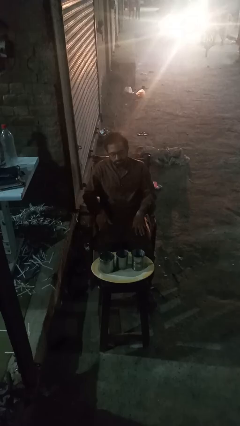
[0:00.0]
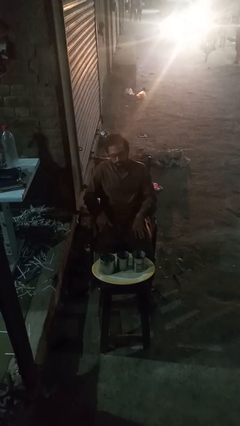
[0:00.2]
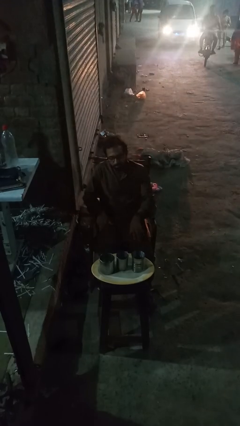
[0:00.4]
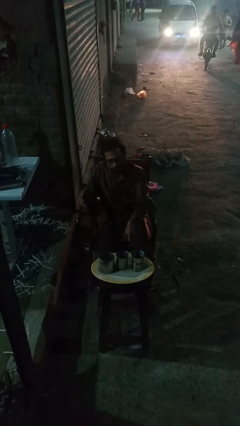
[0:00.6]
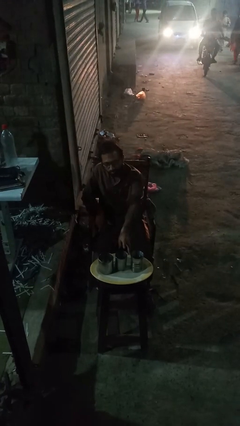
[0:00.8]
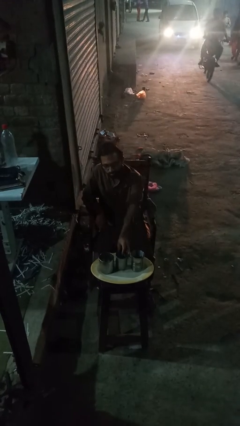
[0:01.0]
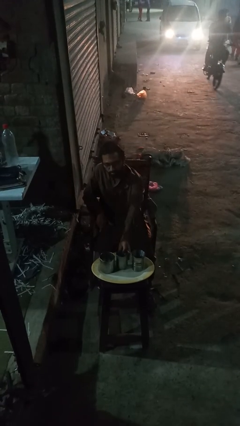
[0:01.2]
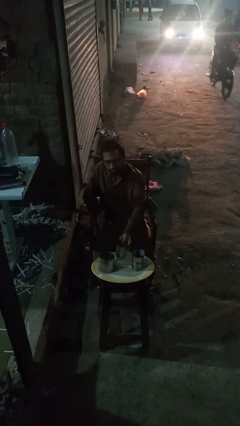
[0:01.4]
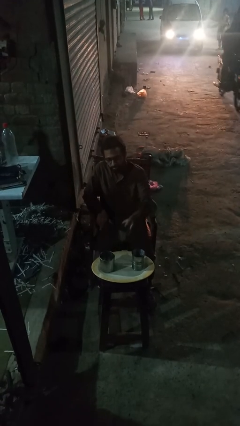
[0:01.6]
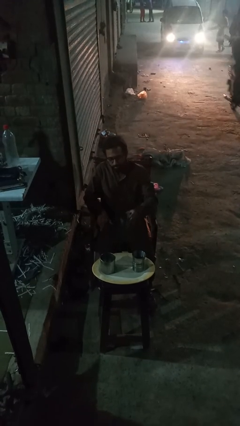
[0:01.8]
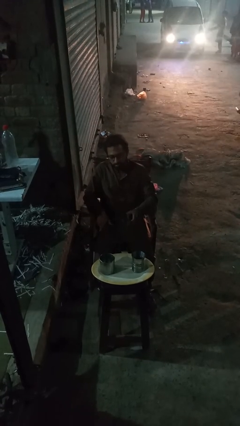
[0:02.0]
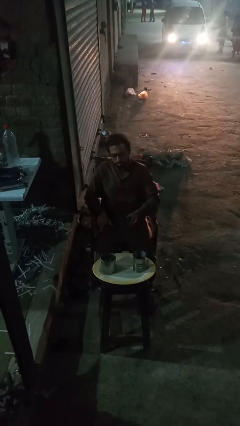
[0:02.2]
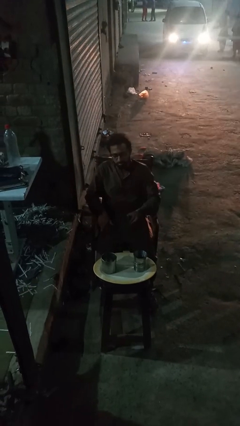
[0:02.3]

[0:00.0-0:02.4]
person picks up object from table

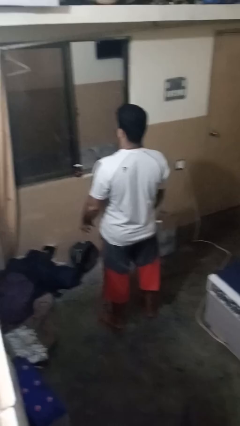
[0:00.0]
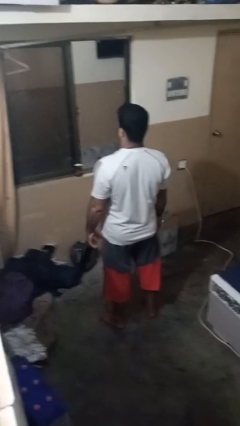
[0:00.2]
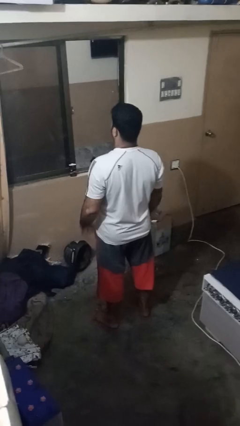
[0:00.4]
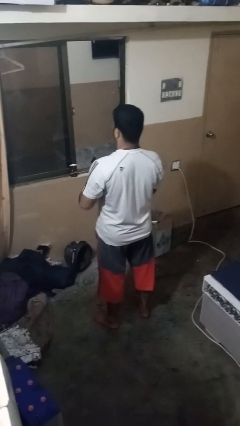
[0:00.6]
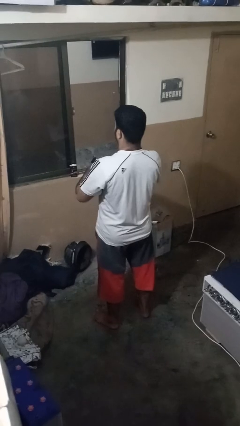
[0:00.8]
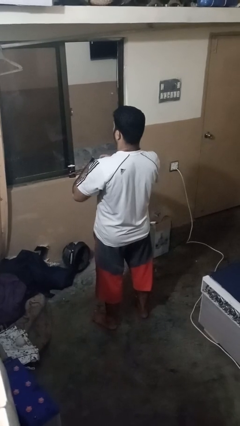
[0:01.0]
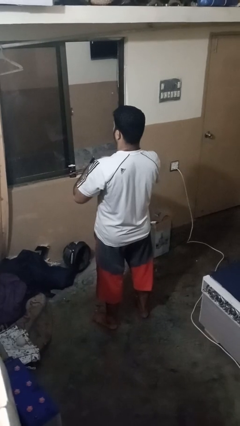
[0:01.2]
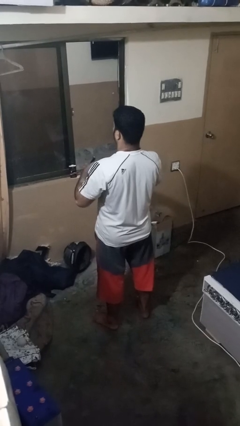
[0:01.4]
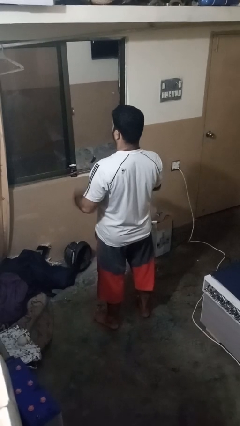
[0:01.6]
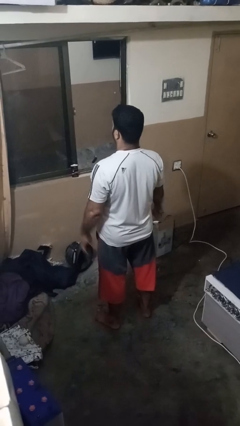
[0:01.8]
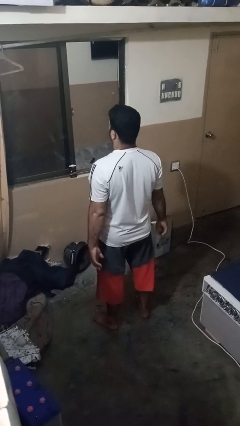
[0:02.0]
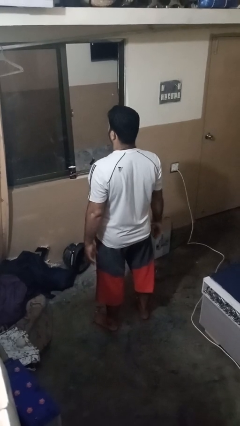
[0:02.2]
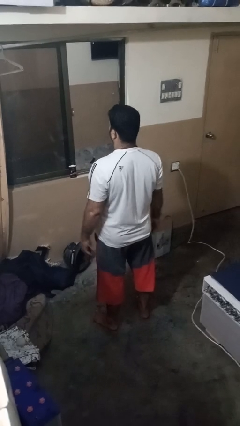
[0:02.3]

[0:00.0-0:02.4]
person takes off ring

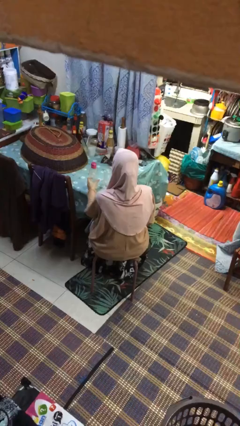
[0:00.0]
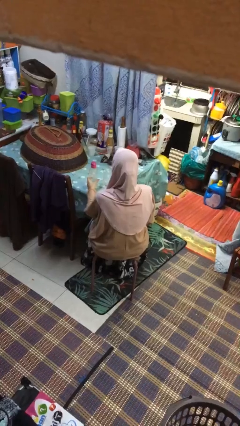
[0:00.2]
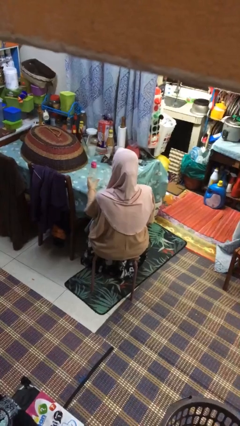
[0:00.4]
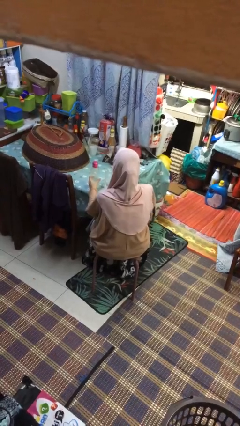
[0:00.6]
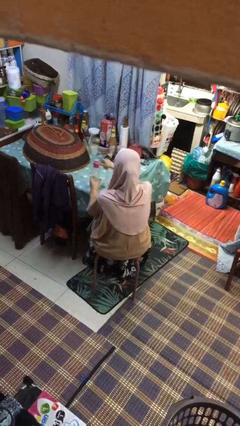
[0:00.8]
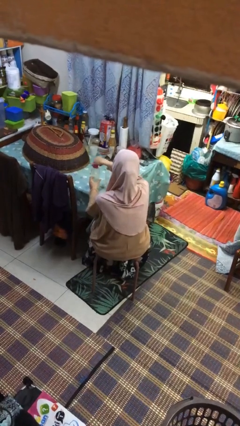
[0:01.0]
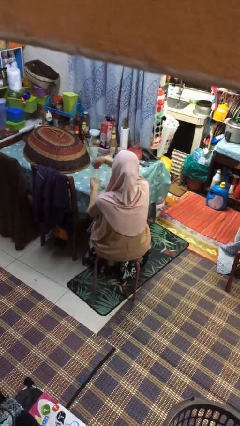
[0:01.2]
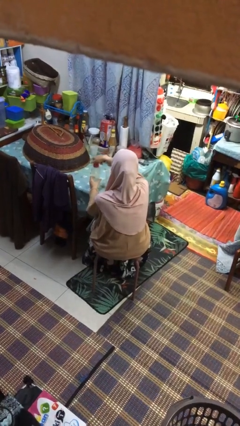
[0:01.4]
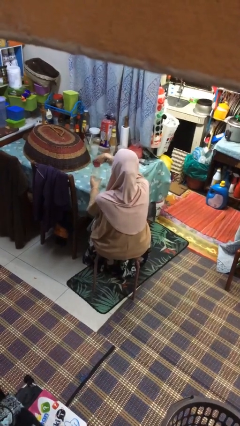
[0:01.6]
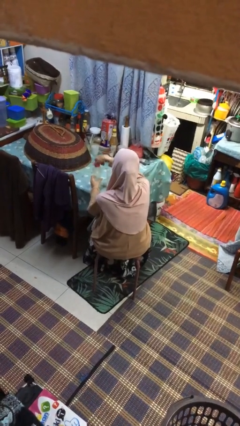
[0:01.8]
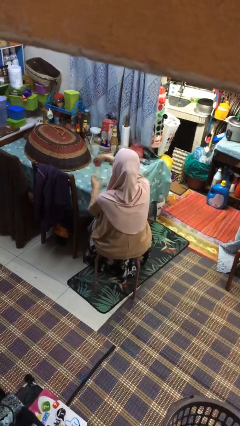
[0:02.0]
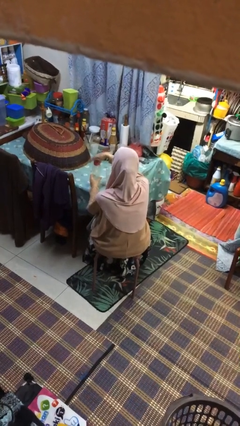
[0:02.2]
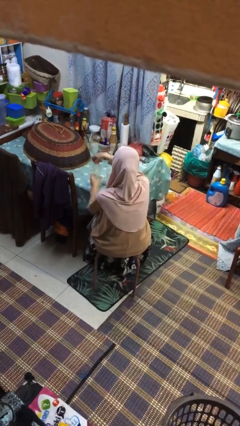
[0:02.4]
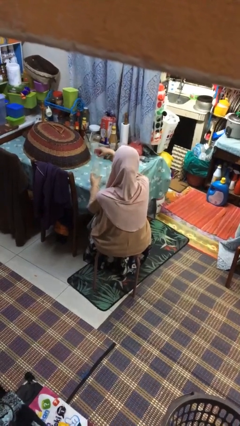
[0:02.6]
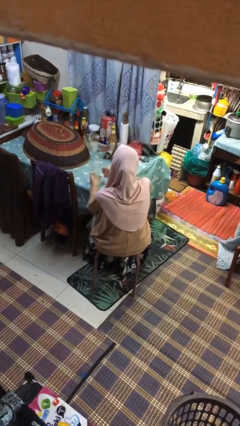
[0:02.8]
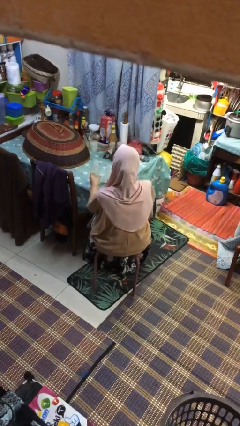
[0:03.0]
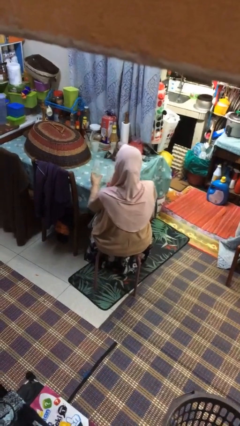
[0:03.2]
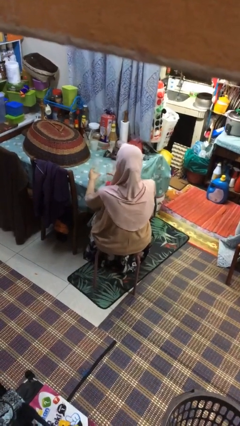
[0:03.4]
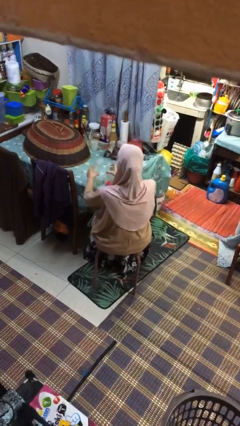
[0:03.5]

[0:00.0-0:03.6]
person unscrews lid from bottle

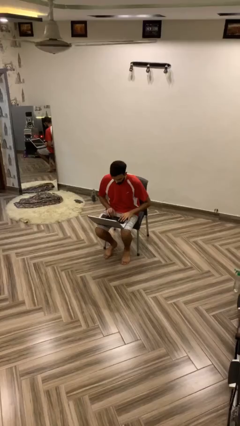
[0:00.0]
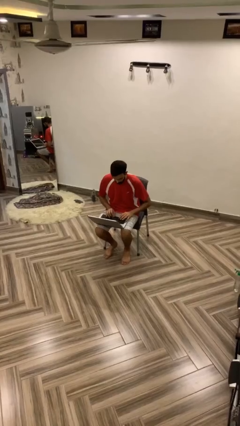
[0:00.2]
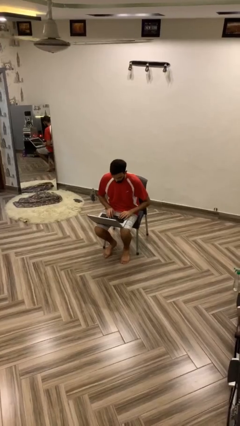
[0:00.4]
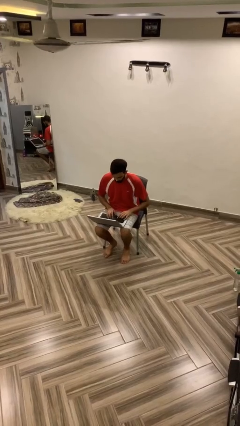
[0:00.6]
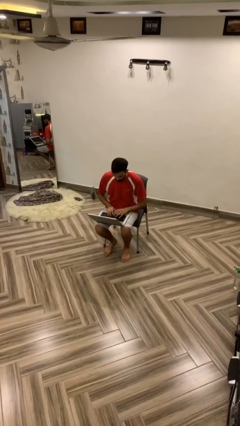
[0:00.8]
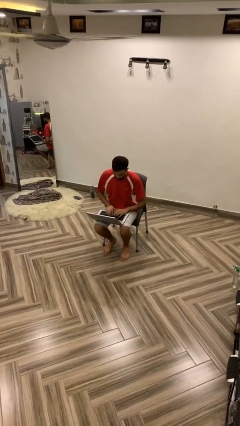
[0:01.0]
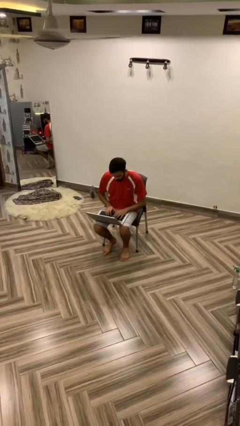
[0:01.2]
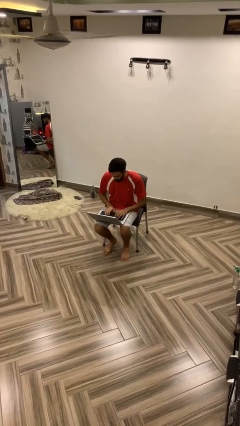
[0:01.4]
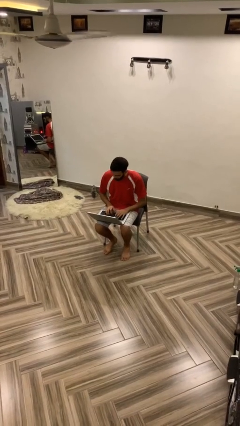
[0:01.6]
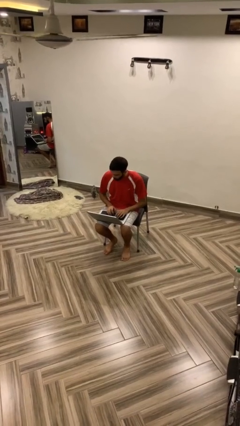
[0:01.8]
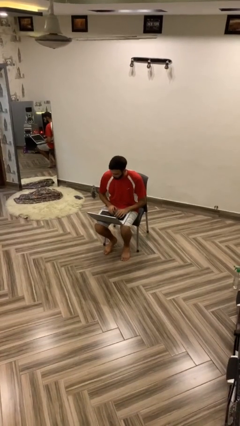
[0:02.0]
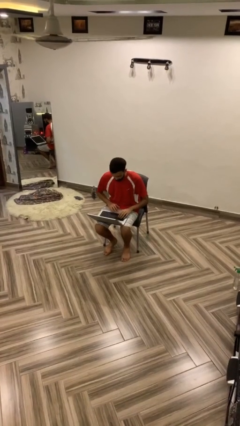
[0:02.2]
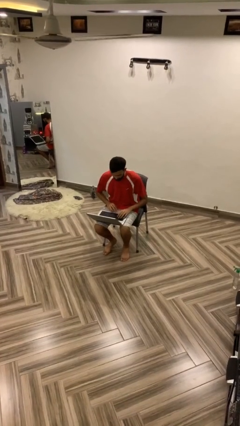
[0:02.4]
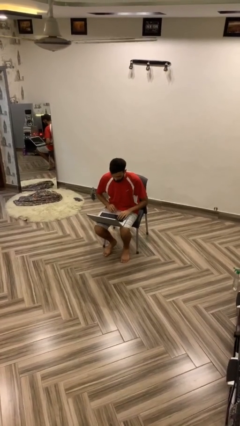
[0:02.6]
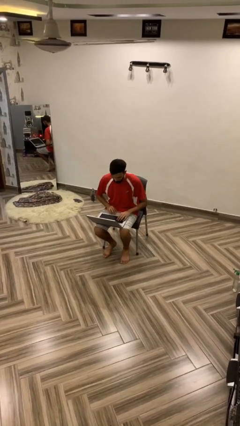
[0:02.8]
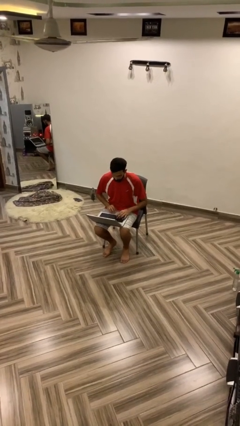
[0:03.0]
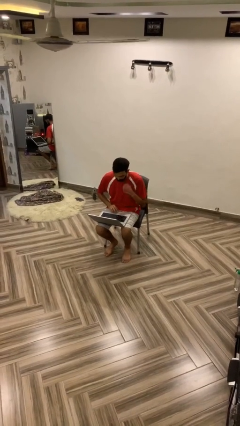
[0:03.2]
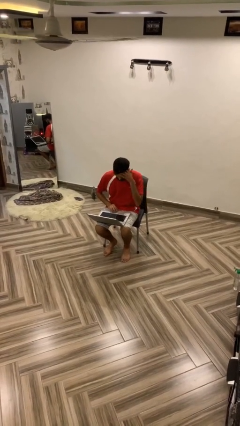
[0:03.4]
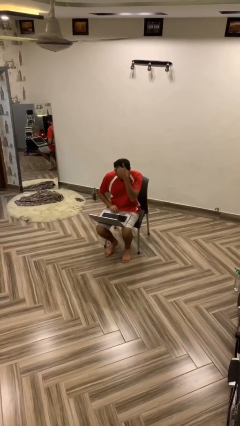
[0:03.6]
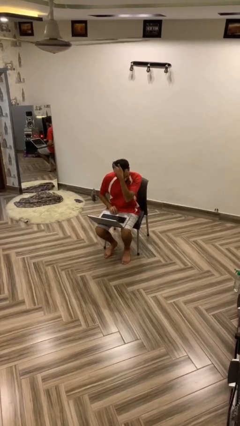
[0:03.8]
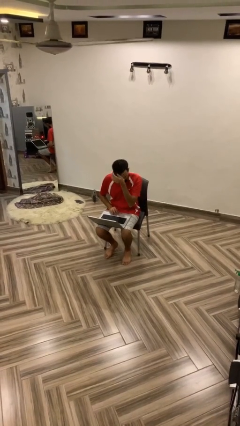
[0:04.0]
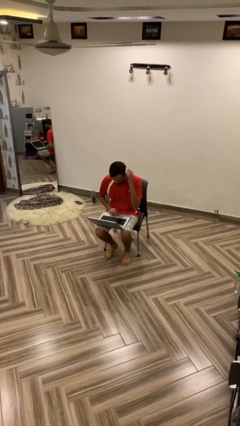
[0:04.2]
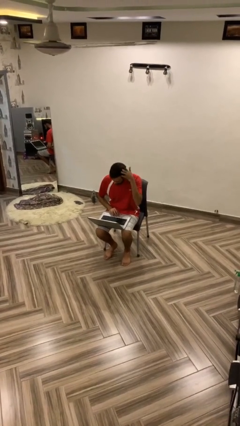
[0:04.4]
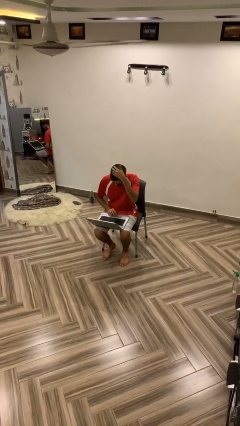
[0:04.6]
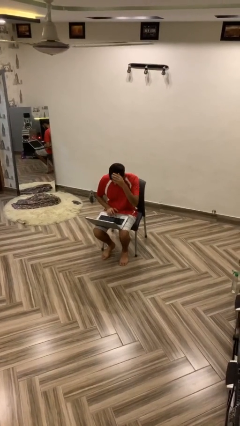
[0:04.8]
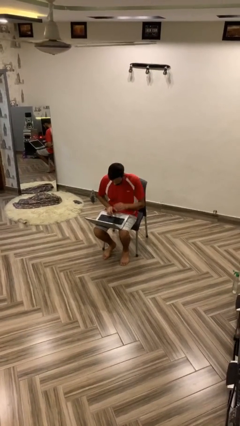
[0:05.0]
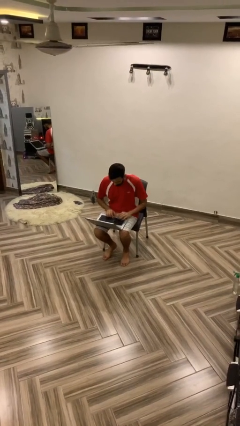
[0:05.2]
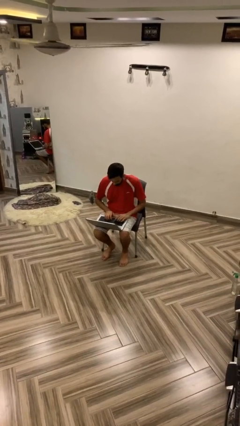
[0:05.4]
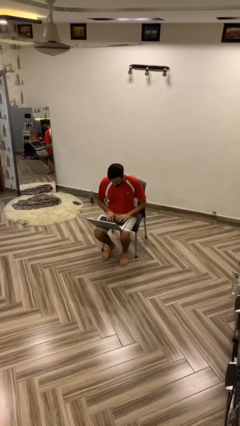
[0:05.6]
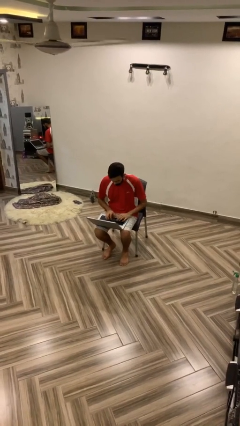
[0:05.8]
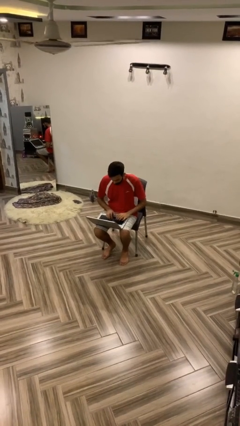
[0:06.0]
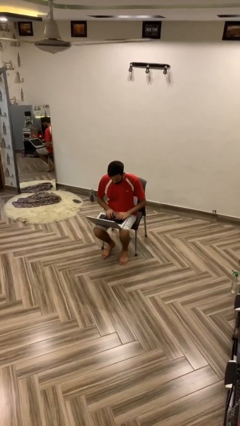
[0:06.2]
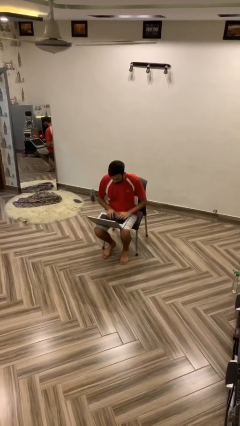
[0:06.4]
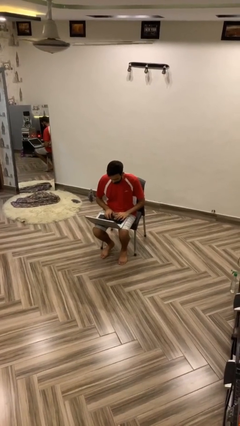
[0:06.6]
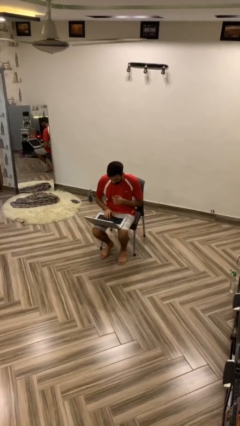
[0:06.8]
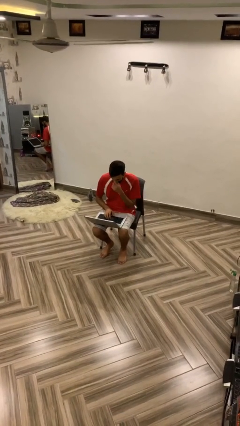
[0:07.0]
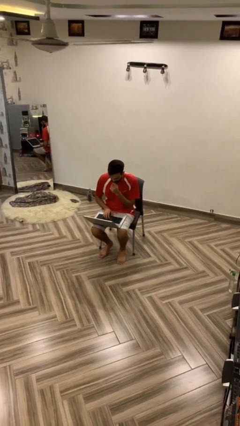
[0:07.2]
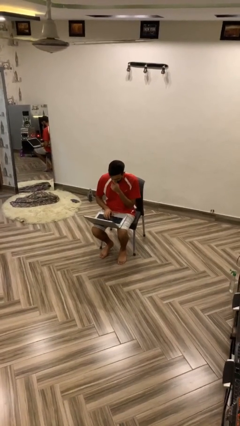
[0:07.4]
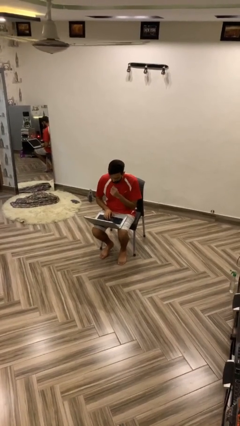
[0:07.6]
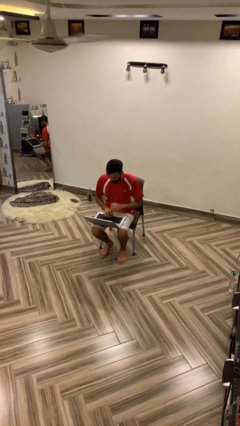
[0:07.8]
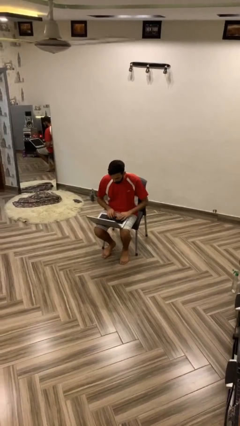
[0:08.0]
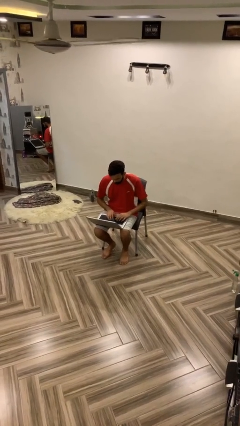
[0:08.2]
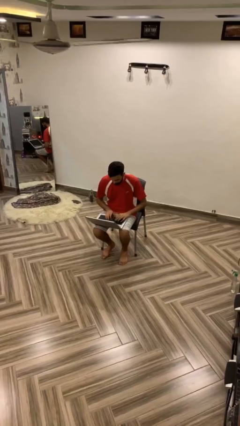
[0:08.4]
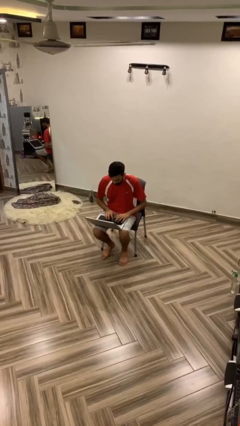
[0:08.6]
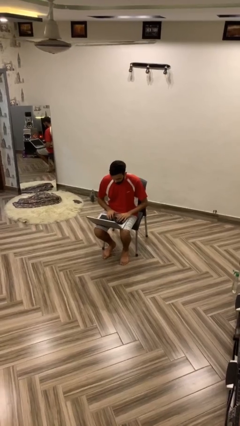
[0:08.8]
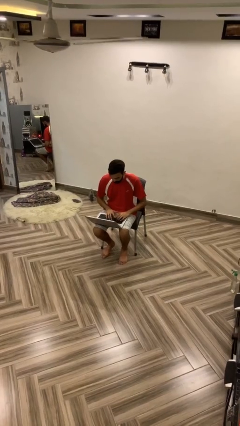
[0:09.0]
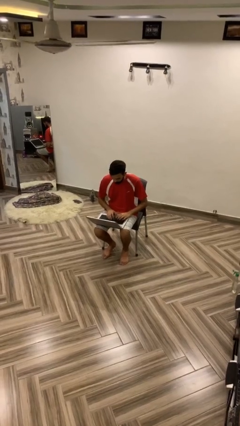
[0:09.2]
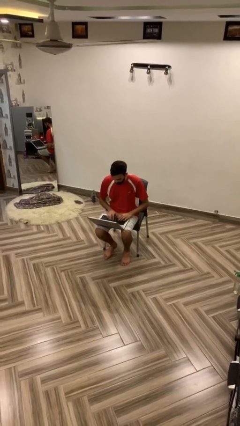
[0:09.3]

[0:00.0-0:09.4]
person interacts with laptop
